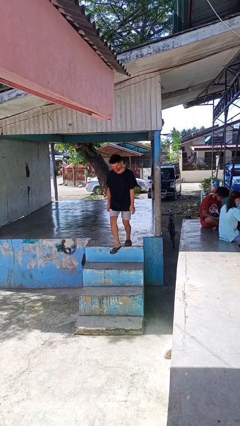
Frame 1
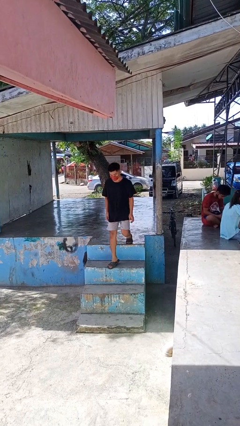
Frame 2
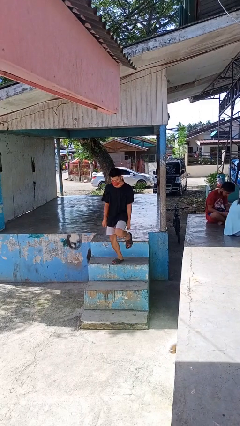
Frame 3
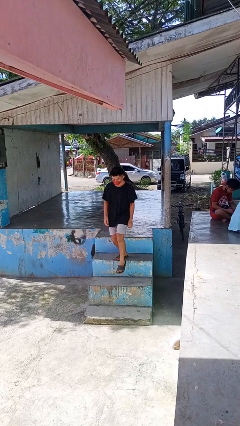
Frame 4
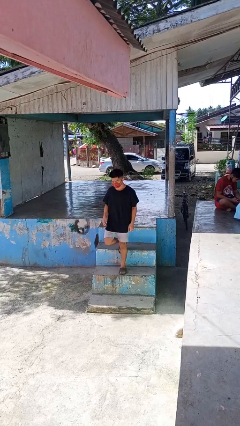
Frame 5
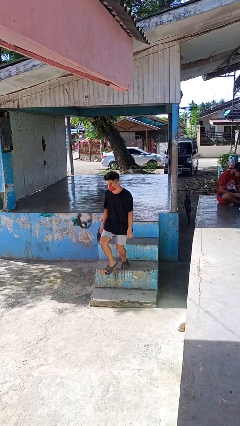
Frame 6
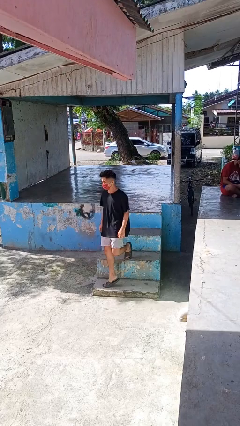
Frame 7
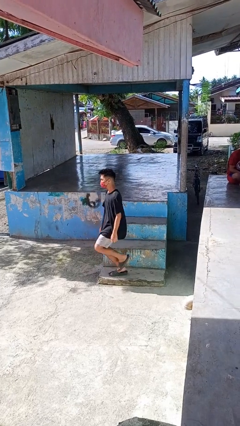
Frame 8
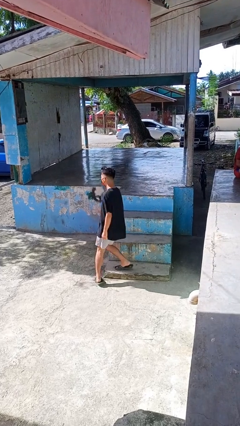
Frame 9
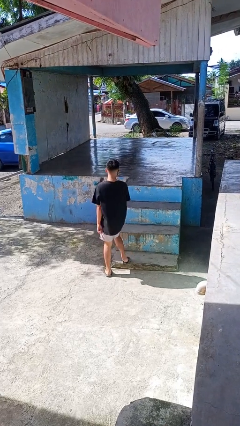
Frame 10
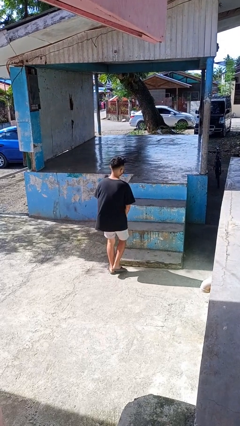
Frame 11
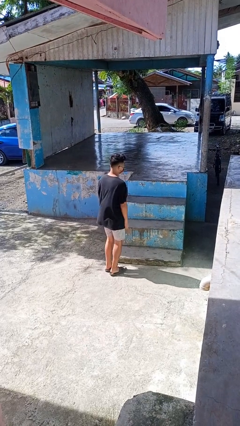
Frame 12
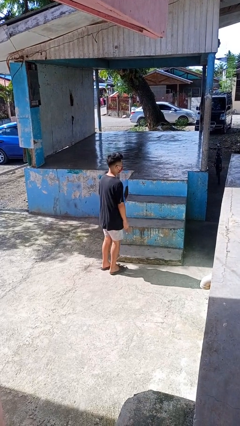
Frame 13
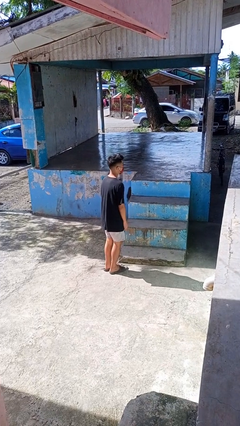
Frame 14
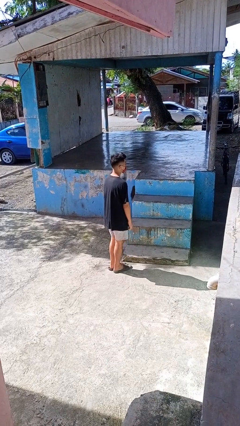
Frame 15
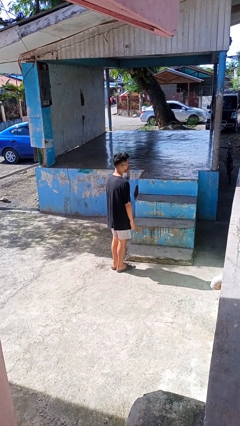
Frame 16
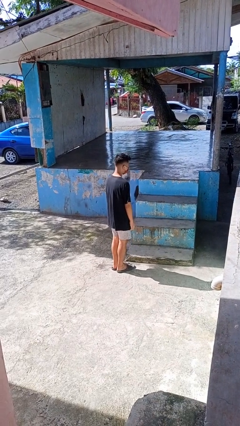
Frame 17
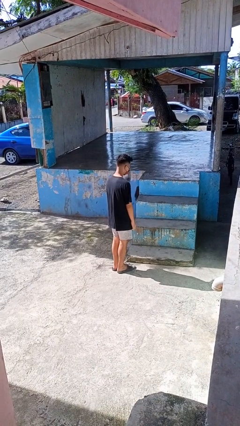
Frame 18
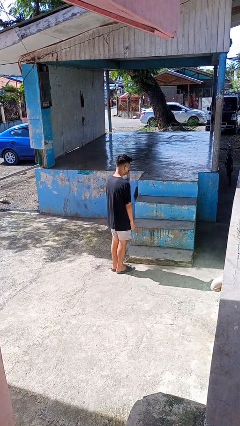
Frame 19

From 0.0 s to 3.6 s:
person climbs down stairs

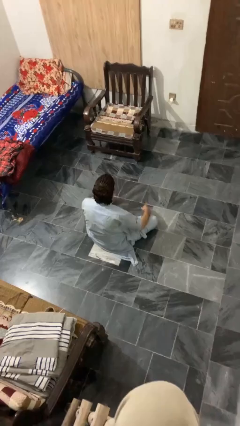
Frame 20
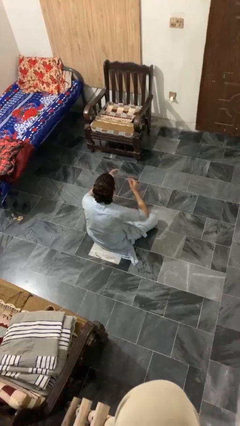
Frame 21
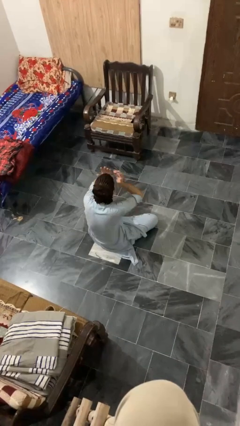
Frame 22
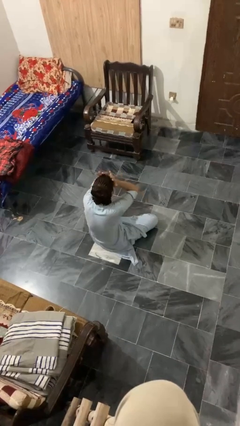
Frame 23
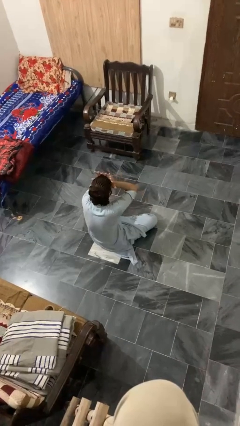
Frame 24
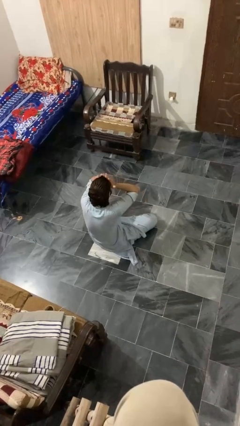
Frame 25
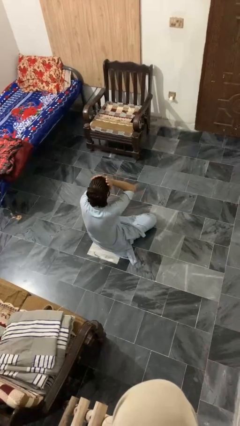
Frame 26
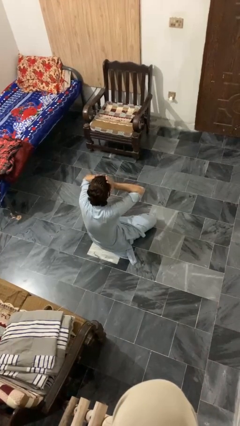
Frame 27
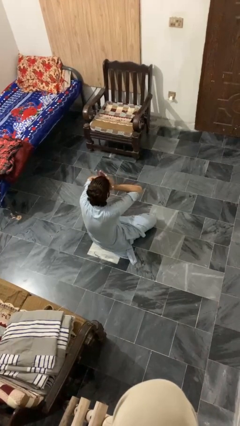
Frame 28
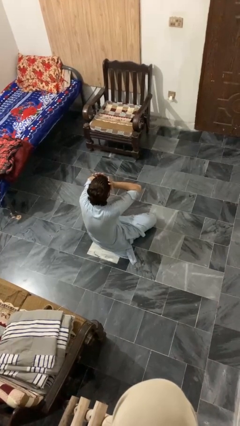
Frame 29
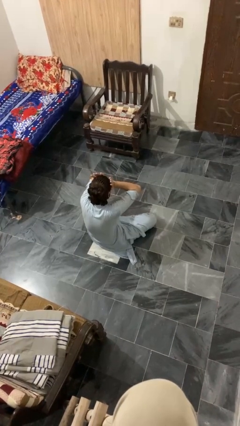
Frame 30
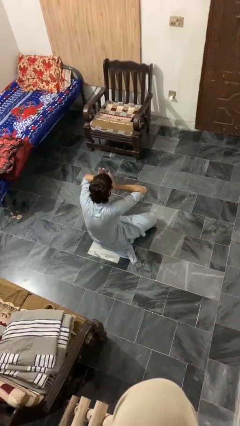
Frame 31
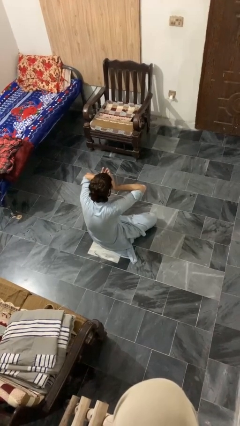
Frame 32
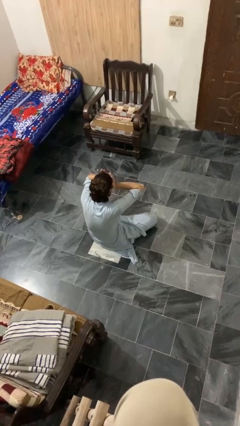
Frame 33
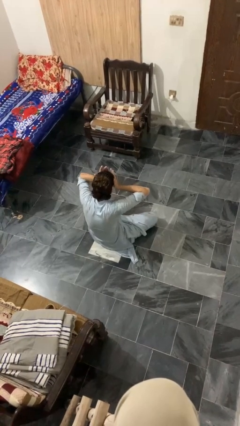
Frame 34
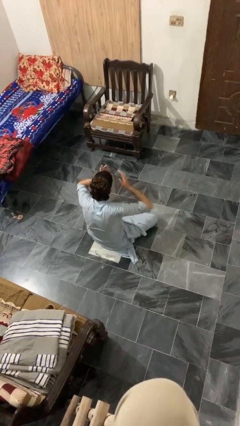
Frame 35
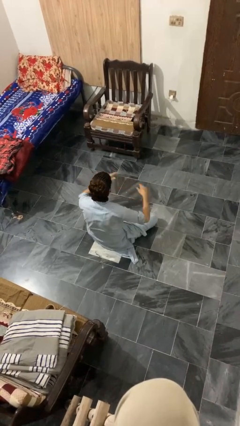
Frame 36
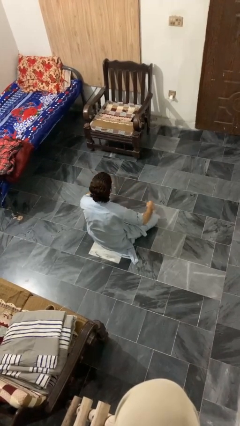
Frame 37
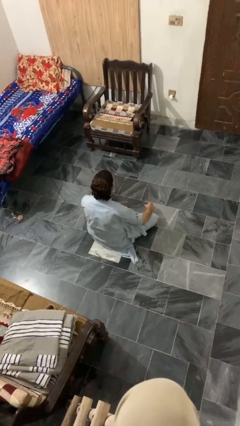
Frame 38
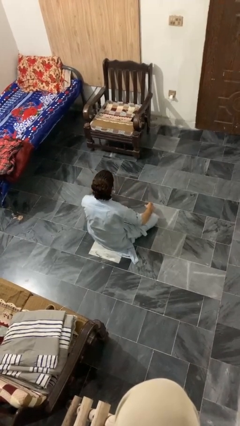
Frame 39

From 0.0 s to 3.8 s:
person rubs eyes

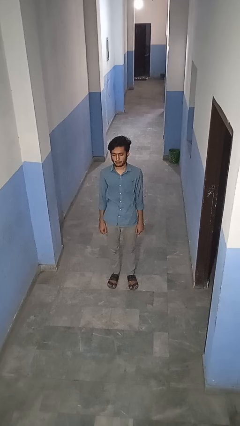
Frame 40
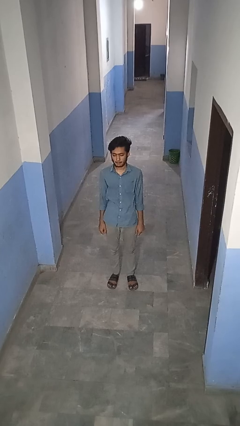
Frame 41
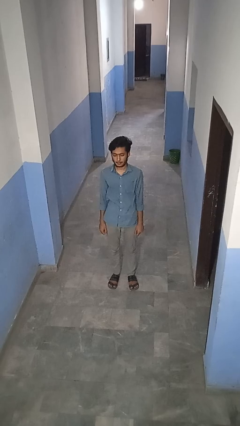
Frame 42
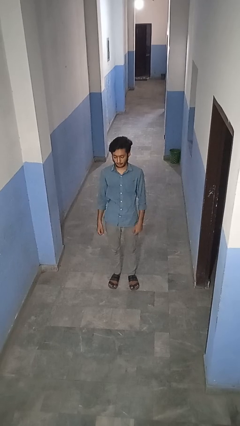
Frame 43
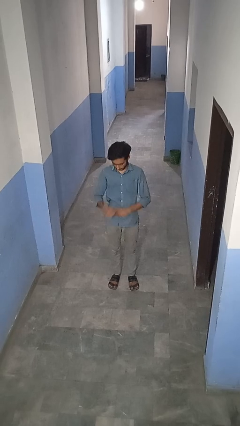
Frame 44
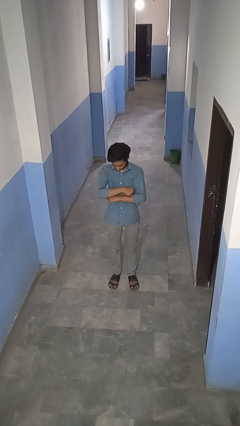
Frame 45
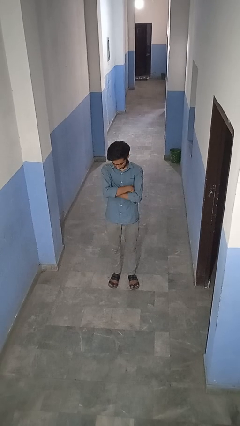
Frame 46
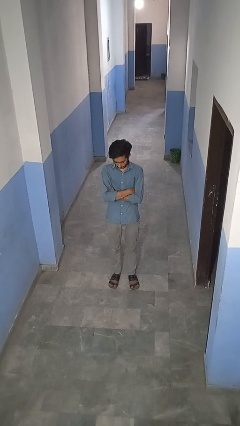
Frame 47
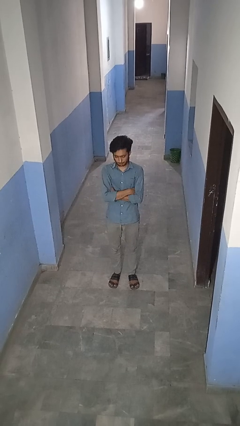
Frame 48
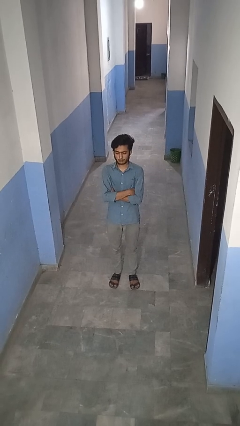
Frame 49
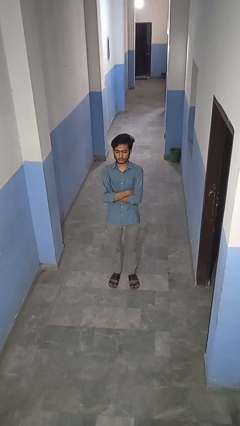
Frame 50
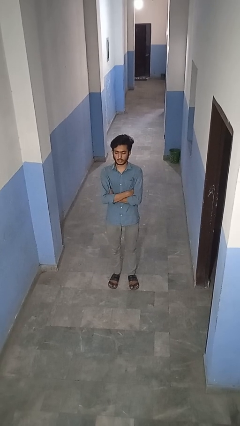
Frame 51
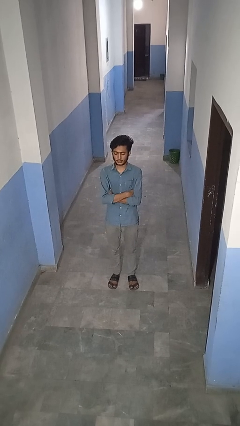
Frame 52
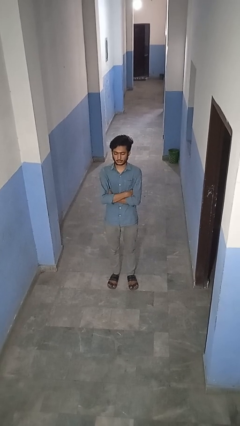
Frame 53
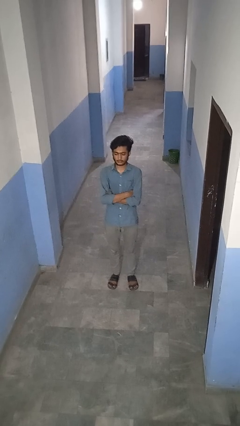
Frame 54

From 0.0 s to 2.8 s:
person crosses arms

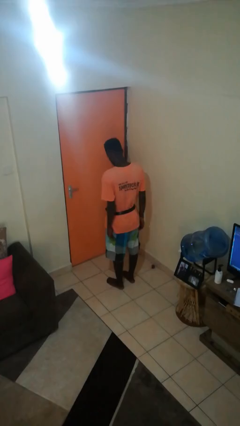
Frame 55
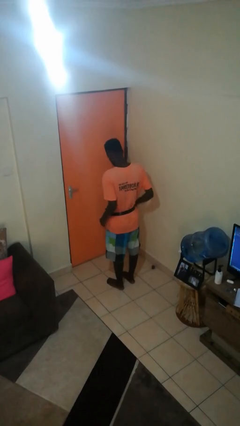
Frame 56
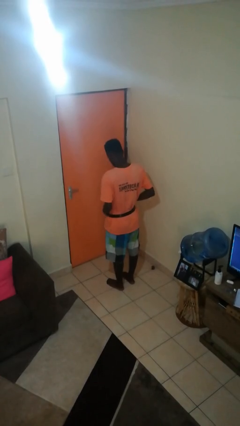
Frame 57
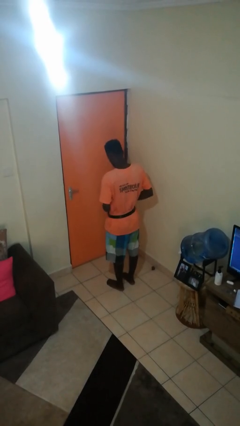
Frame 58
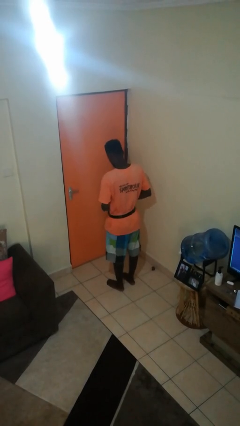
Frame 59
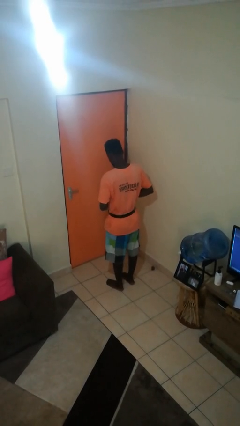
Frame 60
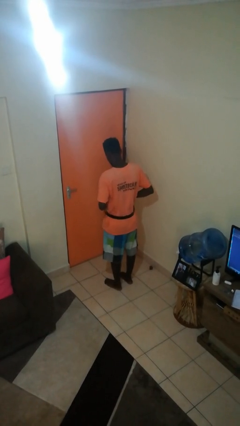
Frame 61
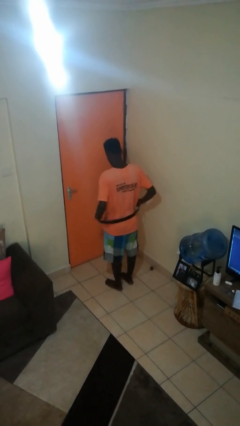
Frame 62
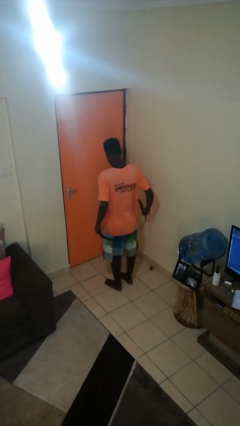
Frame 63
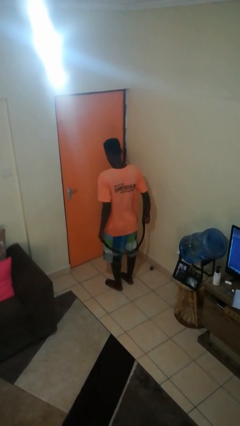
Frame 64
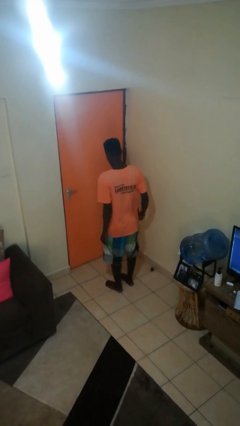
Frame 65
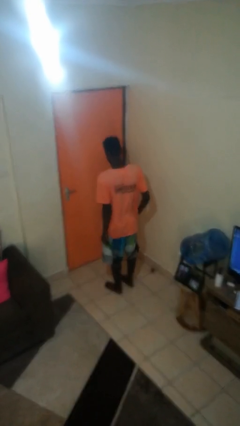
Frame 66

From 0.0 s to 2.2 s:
person takes off belt

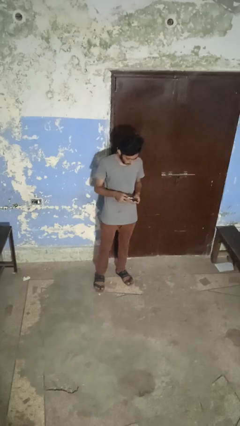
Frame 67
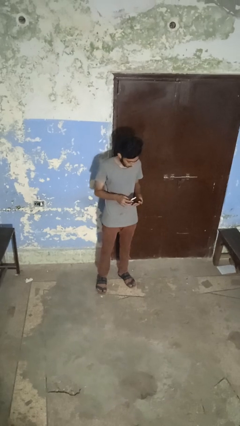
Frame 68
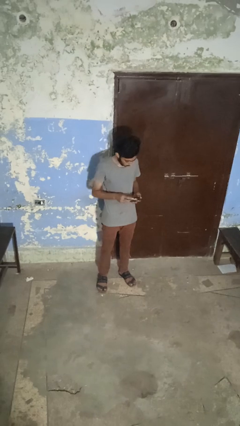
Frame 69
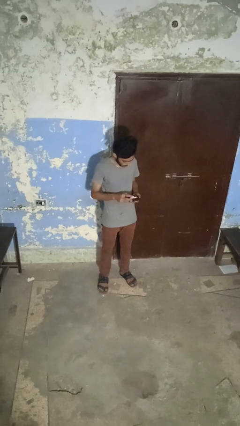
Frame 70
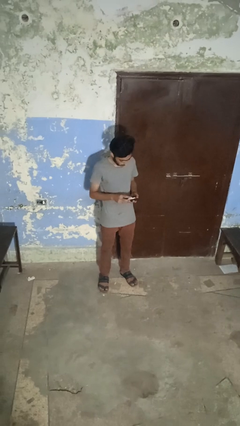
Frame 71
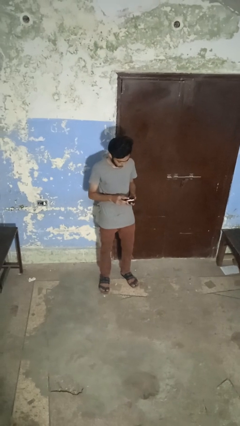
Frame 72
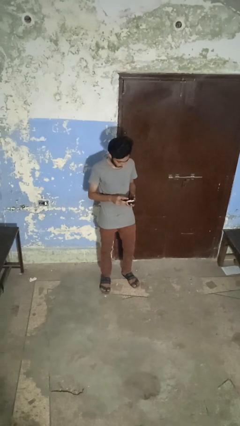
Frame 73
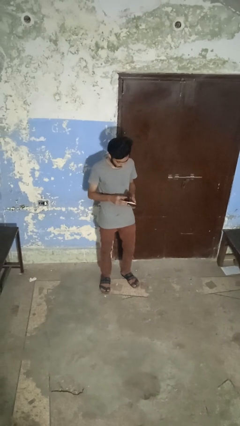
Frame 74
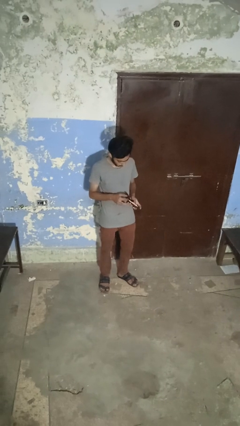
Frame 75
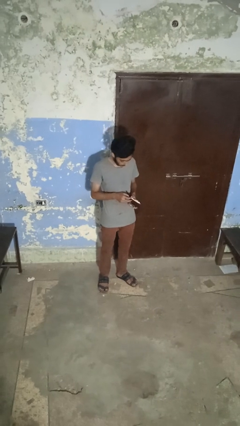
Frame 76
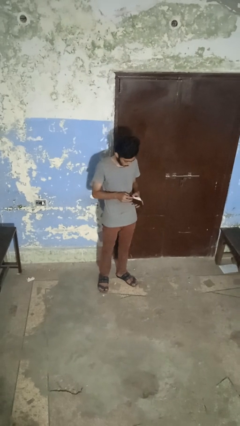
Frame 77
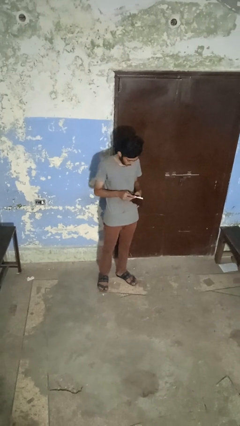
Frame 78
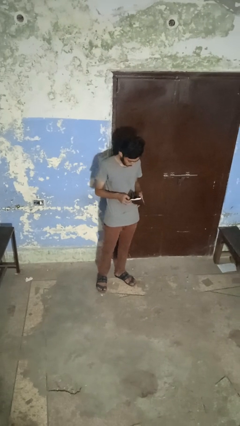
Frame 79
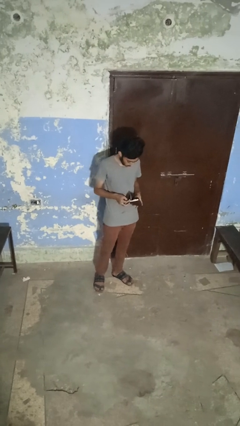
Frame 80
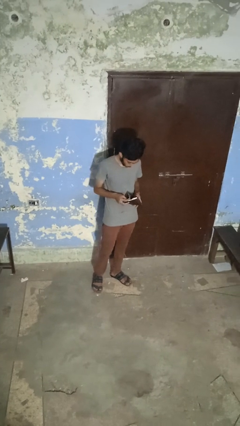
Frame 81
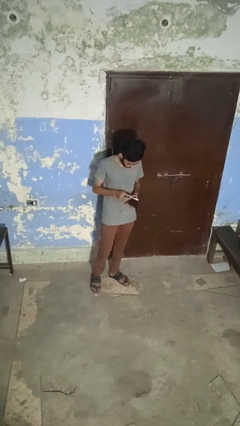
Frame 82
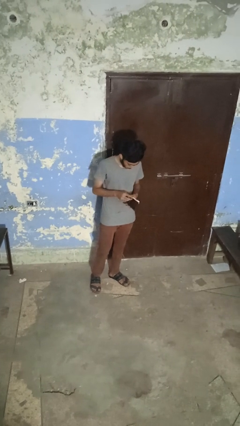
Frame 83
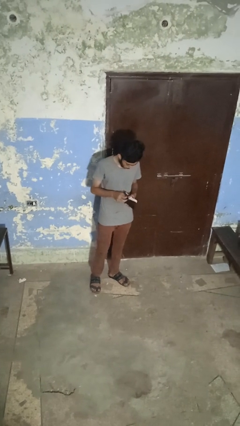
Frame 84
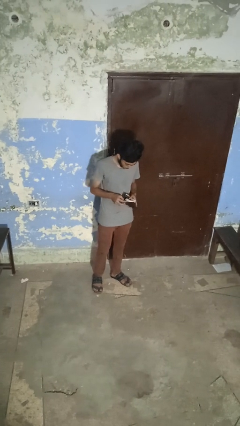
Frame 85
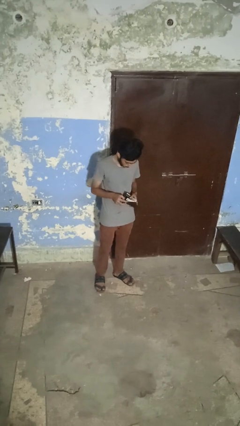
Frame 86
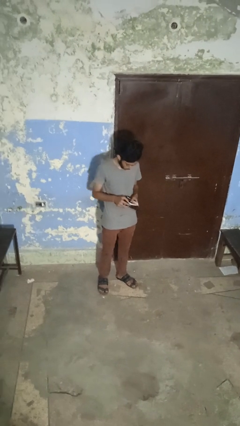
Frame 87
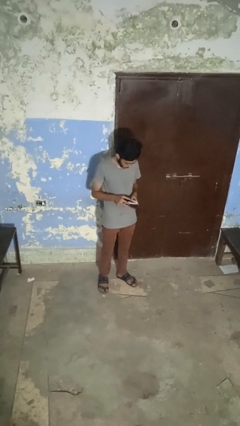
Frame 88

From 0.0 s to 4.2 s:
person searches in purse

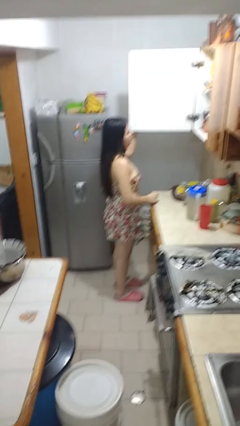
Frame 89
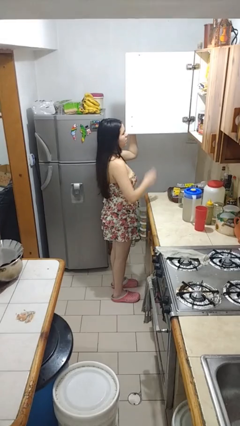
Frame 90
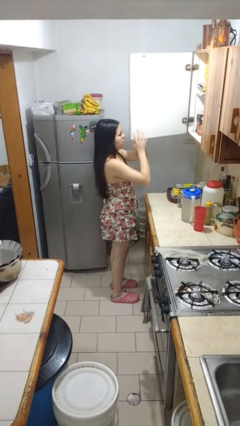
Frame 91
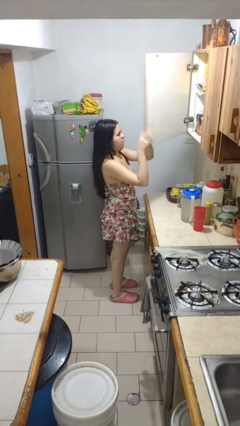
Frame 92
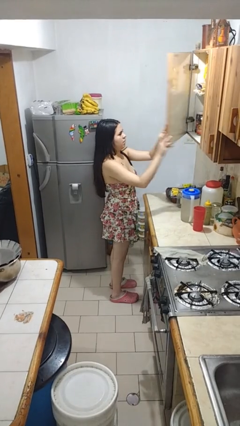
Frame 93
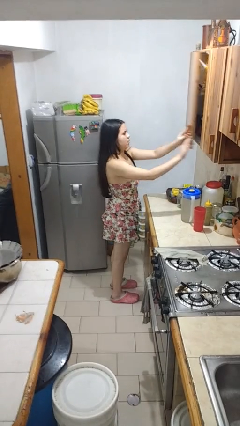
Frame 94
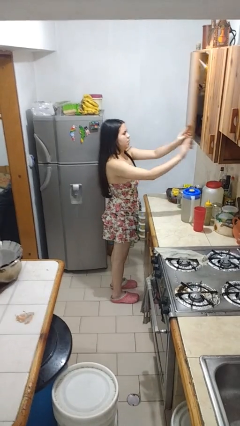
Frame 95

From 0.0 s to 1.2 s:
person closes cabinet
